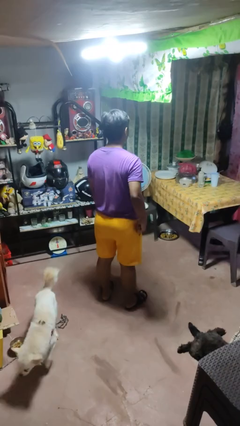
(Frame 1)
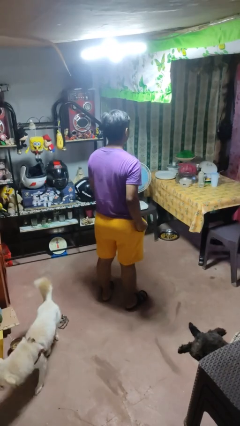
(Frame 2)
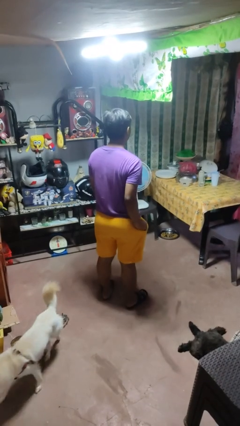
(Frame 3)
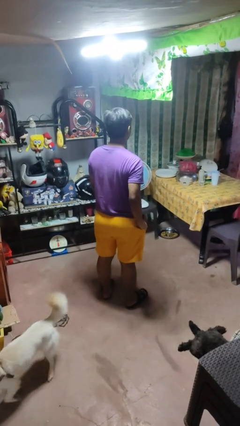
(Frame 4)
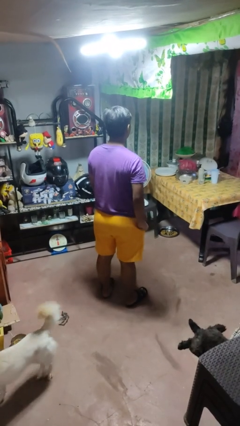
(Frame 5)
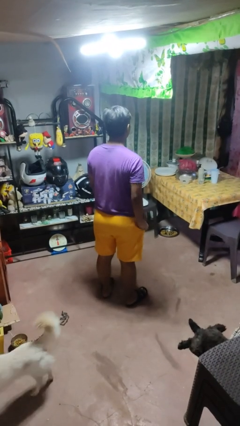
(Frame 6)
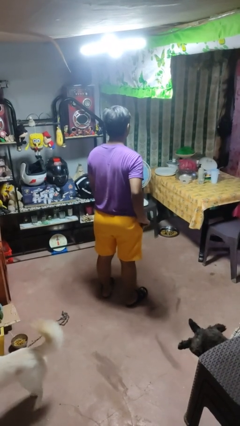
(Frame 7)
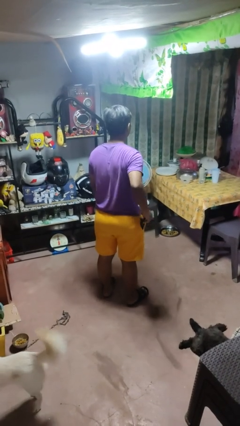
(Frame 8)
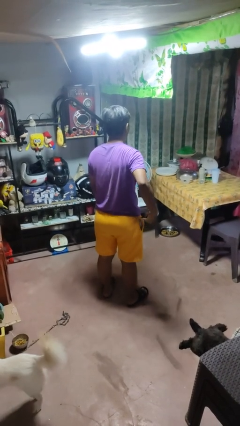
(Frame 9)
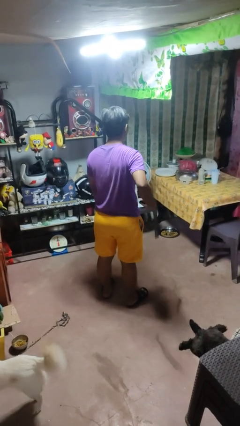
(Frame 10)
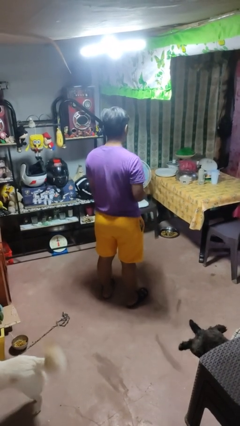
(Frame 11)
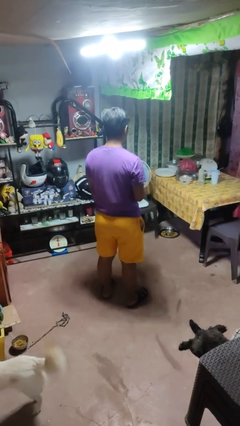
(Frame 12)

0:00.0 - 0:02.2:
person takes phone from pocket

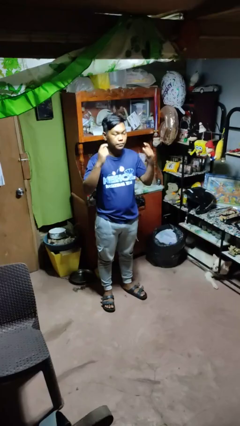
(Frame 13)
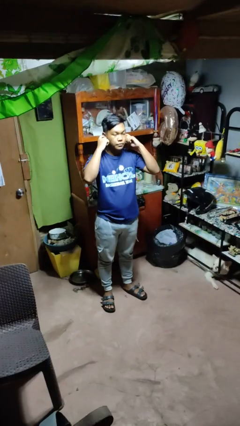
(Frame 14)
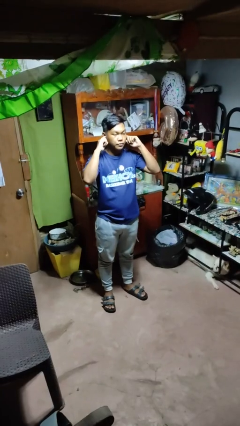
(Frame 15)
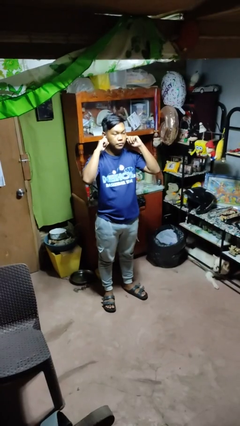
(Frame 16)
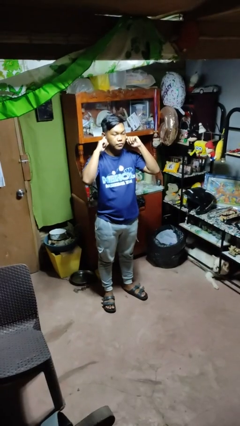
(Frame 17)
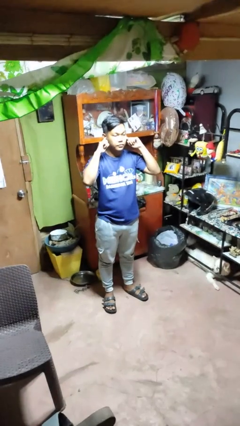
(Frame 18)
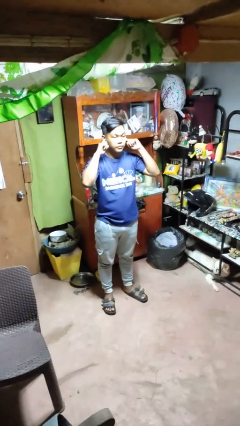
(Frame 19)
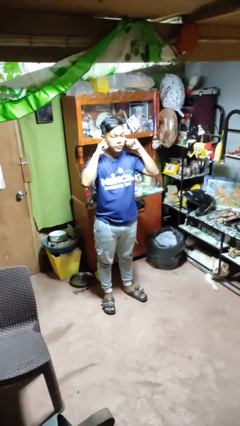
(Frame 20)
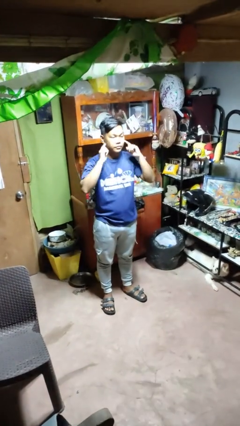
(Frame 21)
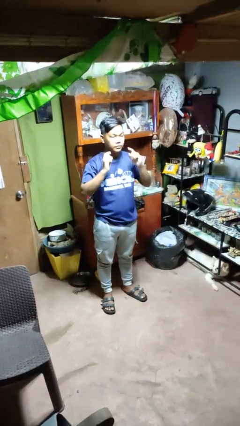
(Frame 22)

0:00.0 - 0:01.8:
person puts fingers in ear

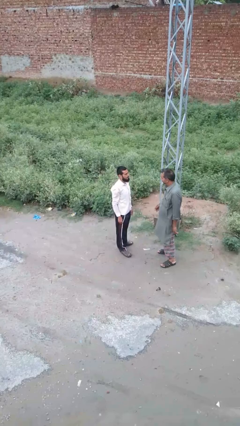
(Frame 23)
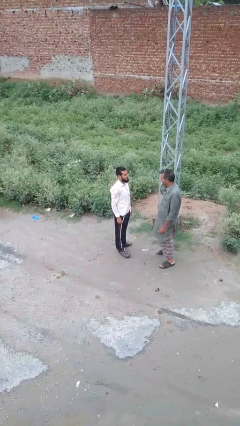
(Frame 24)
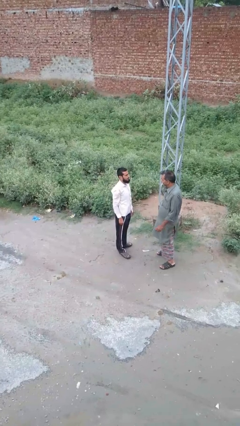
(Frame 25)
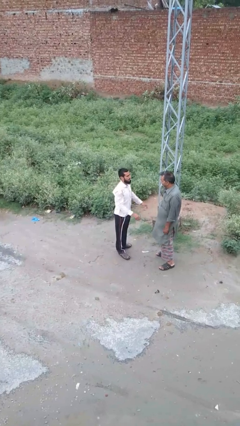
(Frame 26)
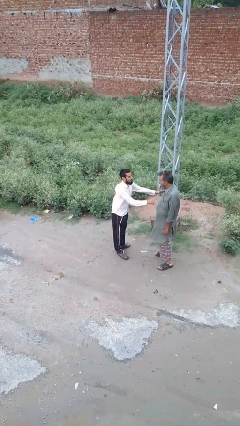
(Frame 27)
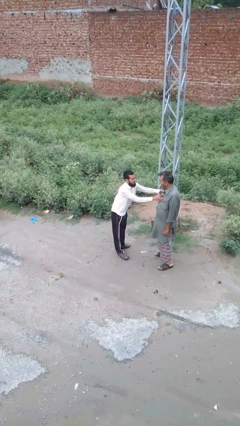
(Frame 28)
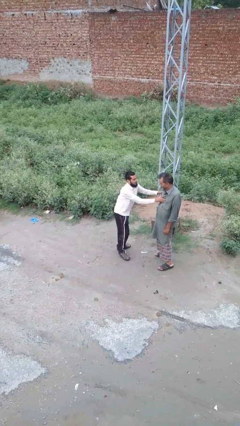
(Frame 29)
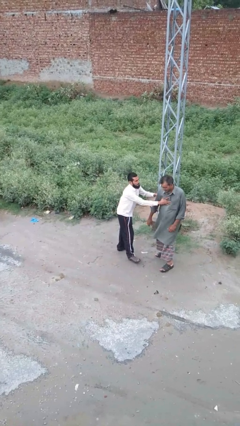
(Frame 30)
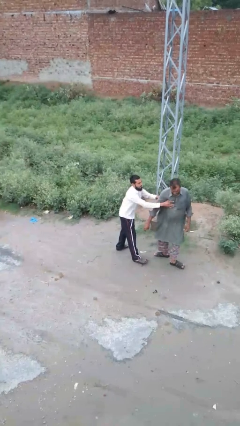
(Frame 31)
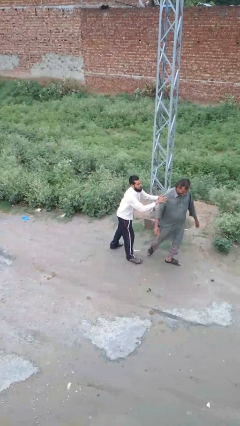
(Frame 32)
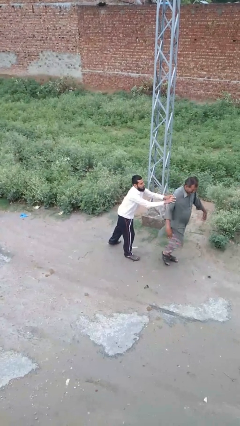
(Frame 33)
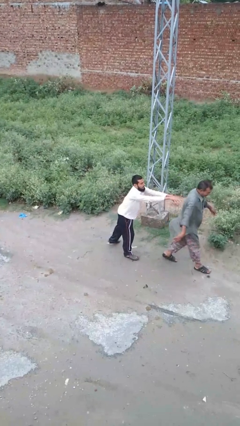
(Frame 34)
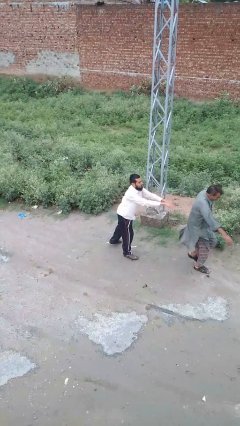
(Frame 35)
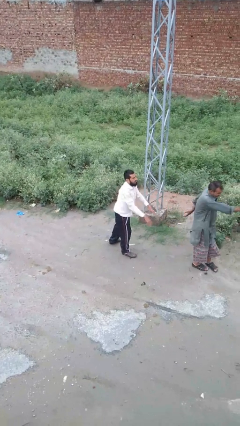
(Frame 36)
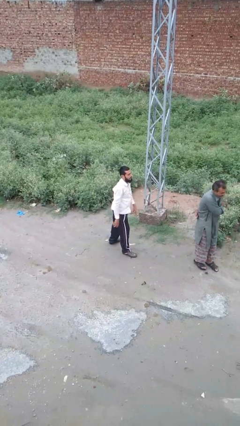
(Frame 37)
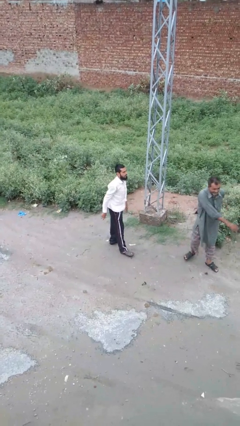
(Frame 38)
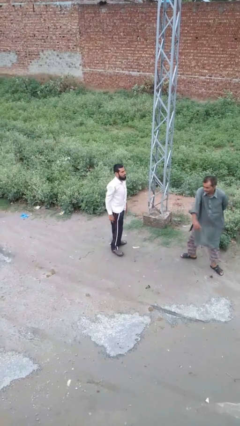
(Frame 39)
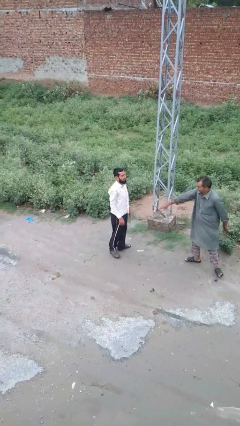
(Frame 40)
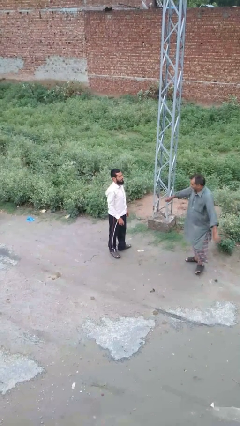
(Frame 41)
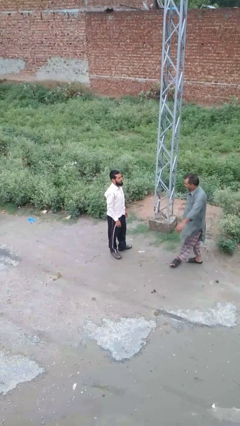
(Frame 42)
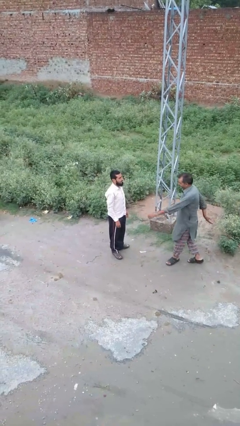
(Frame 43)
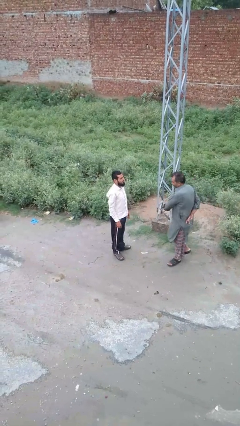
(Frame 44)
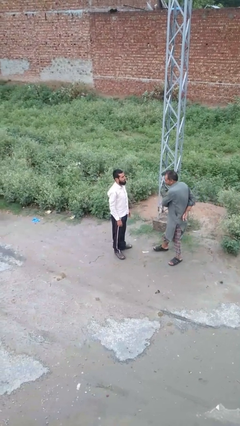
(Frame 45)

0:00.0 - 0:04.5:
person shoves person

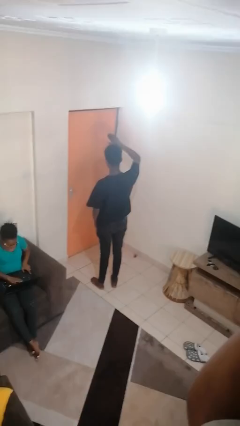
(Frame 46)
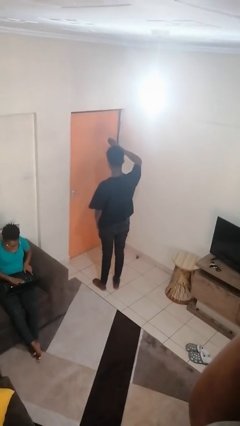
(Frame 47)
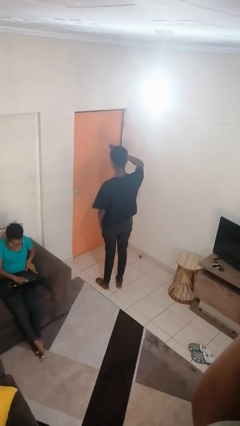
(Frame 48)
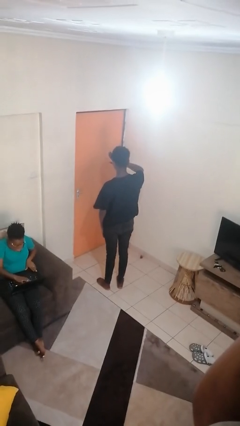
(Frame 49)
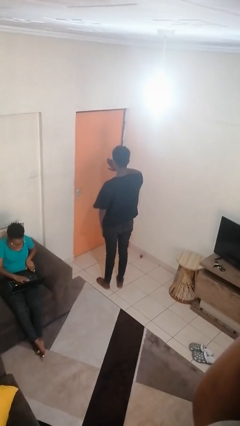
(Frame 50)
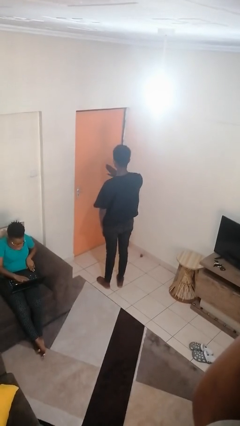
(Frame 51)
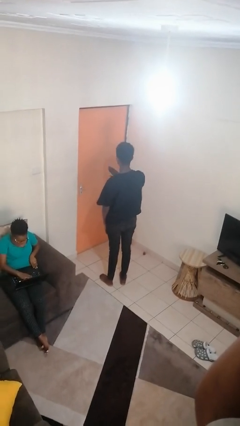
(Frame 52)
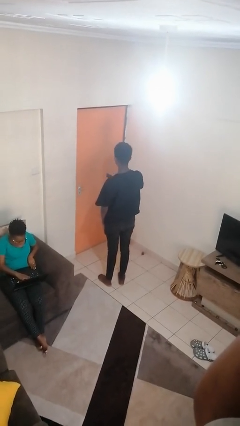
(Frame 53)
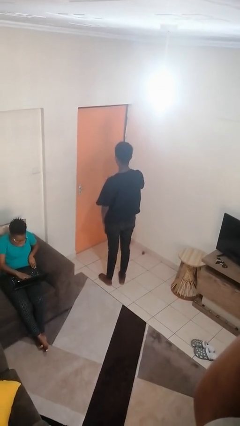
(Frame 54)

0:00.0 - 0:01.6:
person gestures swipe down

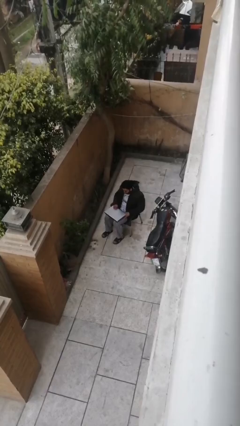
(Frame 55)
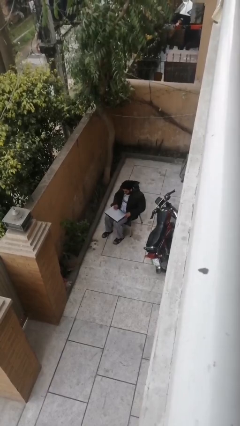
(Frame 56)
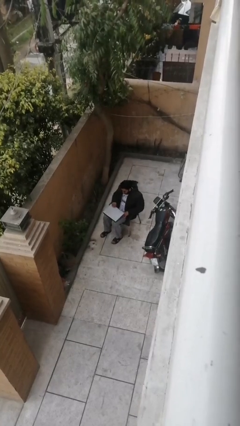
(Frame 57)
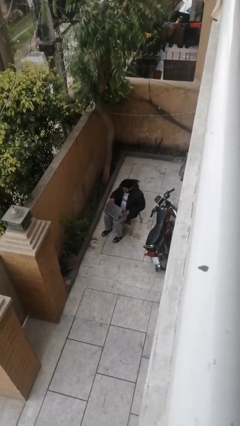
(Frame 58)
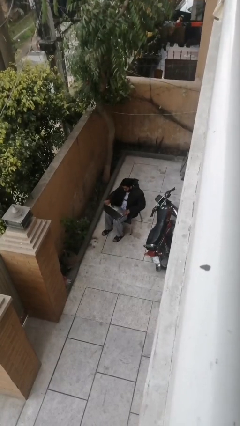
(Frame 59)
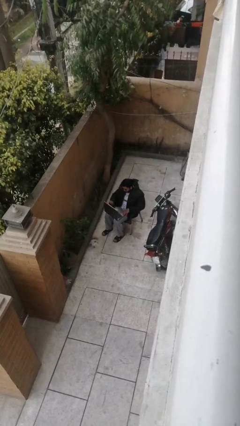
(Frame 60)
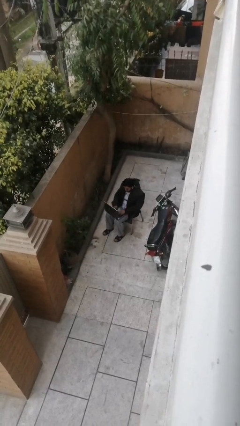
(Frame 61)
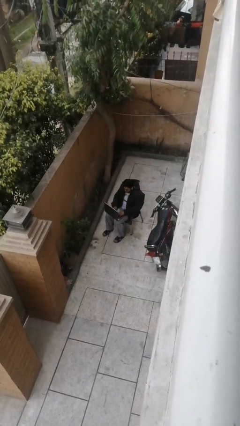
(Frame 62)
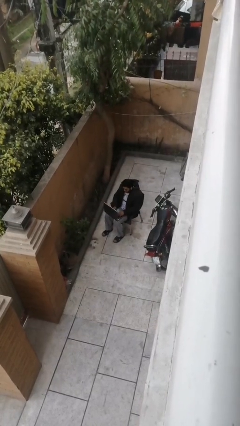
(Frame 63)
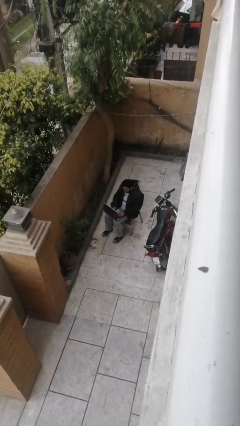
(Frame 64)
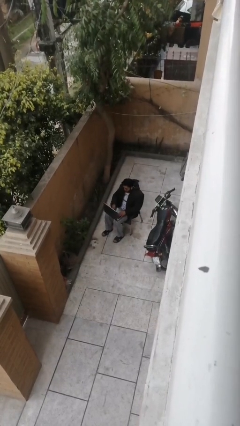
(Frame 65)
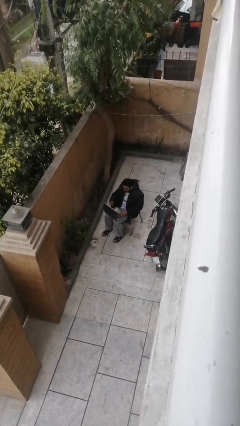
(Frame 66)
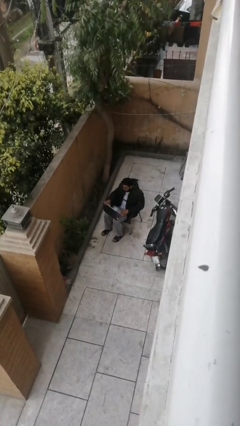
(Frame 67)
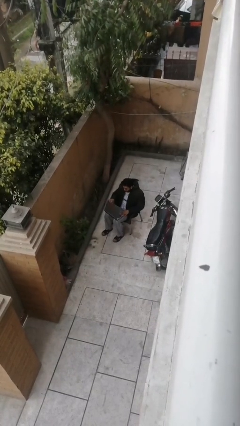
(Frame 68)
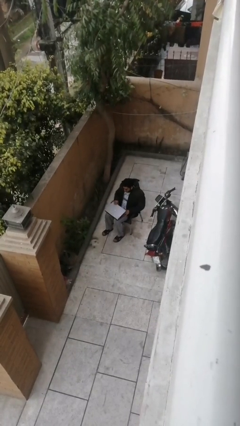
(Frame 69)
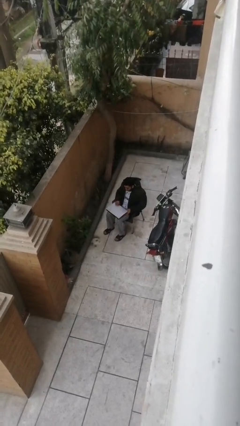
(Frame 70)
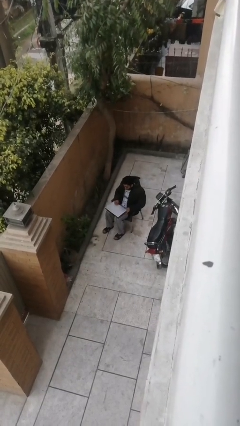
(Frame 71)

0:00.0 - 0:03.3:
person interacts with laptop

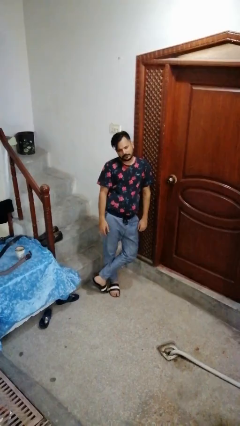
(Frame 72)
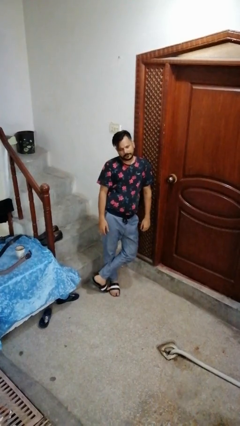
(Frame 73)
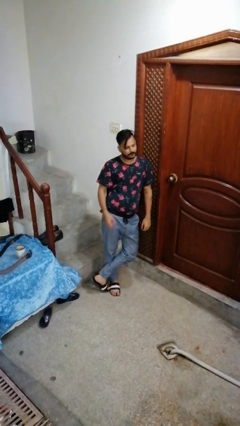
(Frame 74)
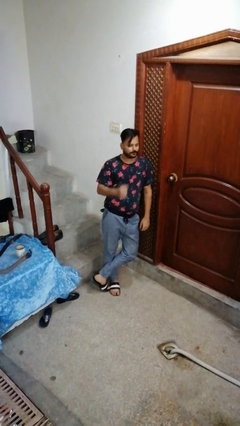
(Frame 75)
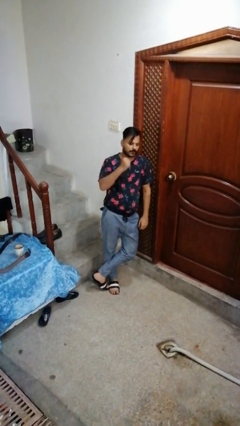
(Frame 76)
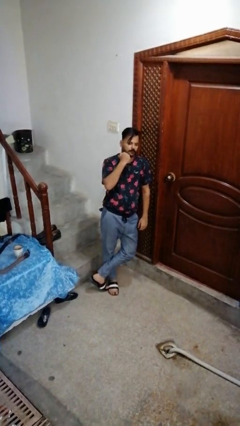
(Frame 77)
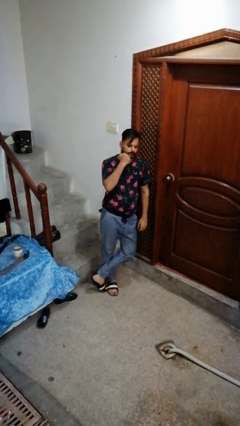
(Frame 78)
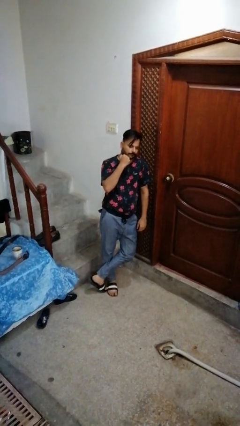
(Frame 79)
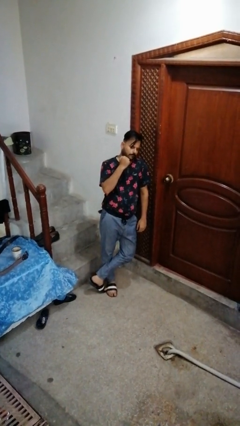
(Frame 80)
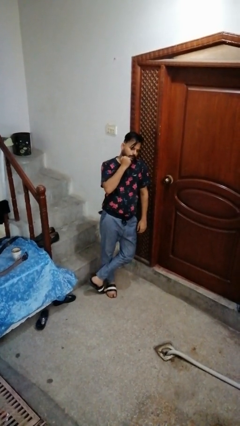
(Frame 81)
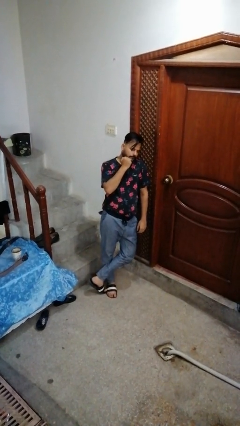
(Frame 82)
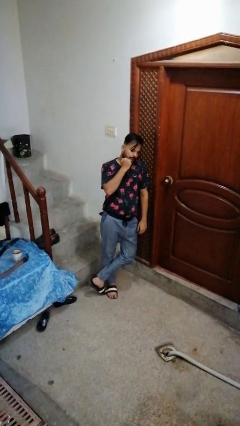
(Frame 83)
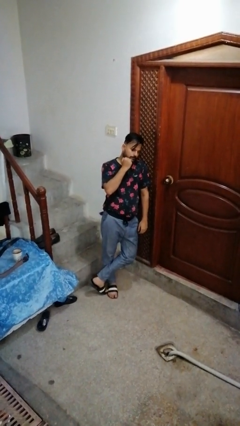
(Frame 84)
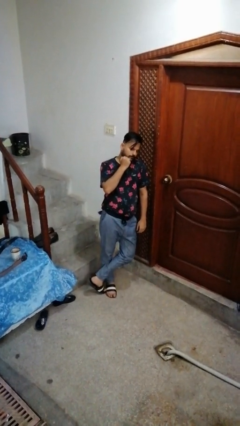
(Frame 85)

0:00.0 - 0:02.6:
person strokes chin

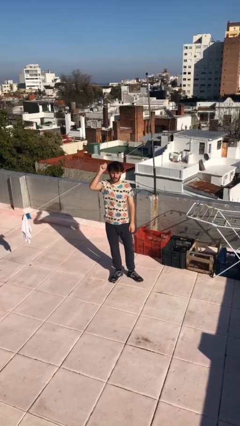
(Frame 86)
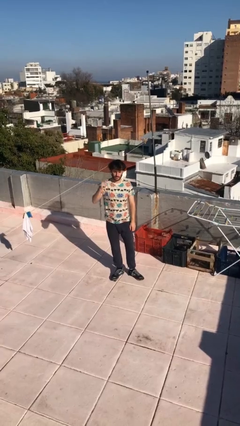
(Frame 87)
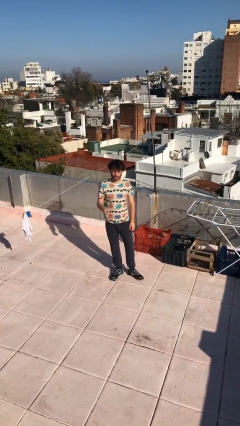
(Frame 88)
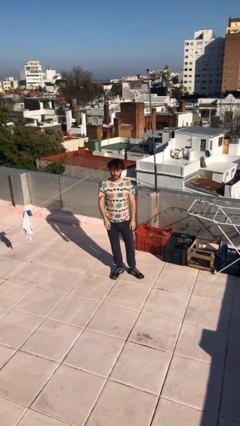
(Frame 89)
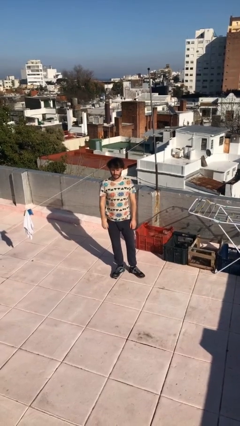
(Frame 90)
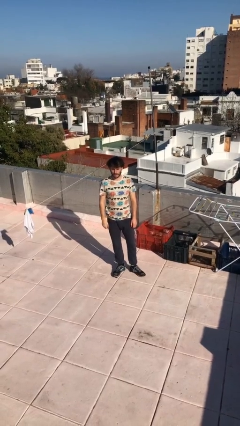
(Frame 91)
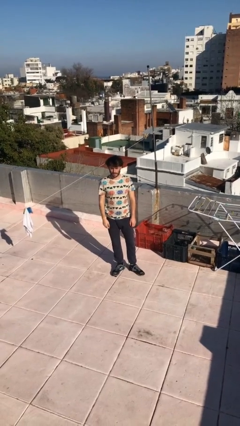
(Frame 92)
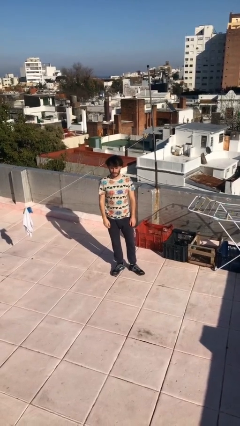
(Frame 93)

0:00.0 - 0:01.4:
person gestures lower hand
